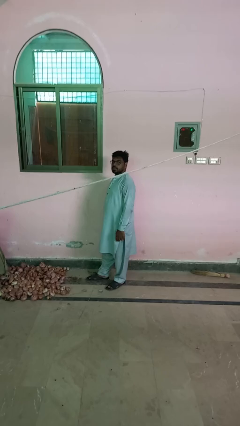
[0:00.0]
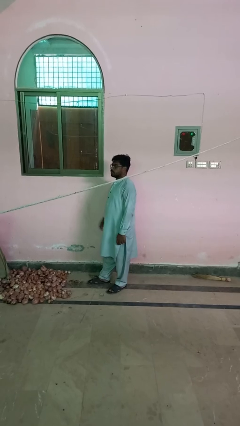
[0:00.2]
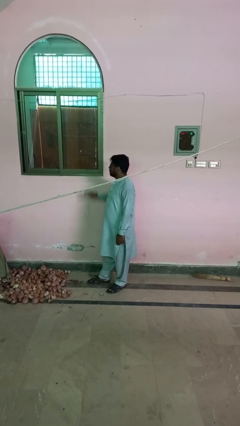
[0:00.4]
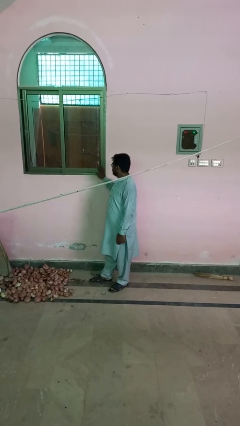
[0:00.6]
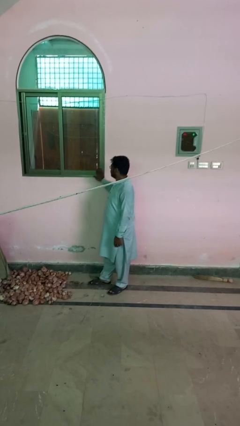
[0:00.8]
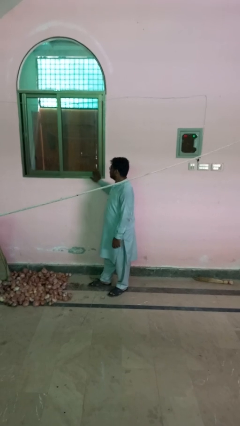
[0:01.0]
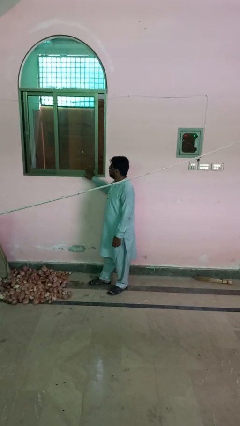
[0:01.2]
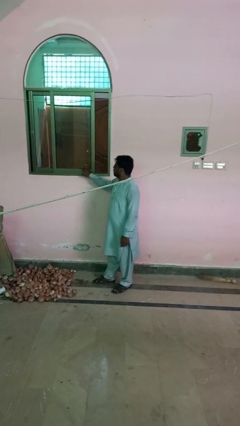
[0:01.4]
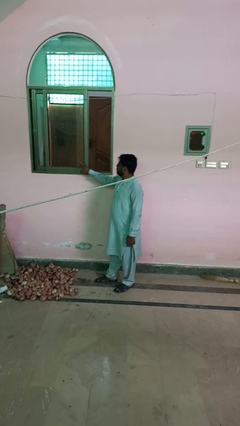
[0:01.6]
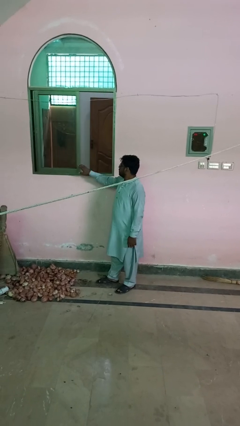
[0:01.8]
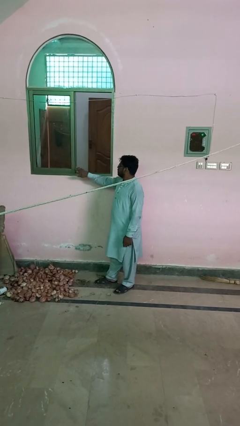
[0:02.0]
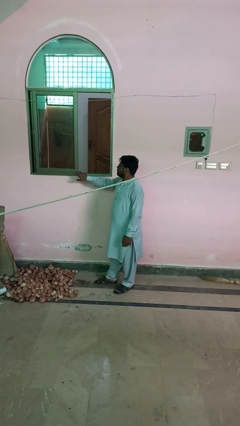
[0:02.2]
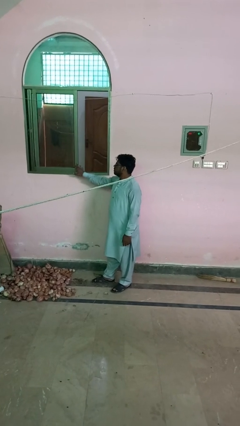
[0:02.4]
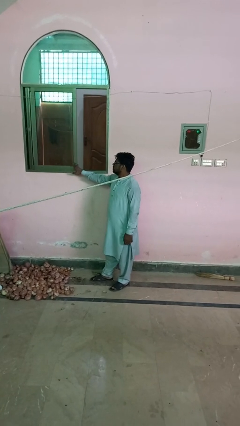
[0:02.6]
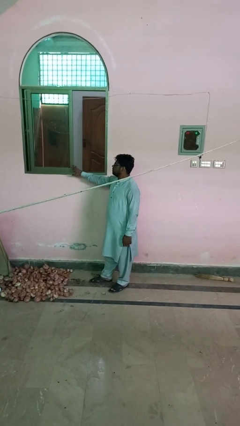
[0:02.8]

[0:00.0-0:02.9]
person opens sliding door

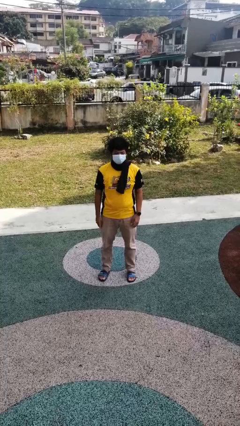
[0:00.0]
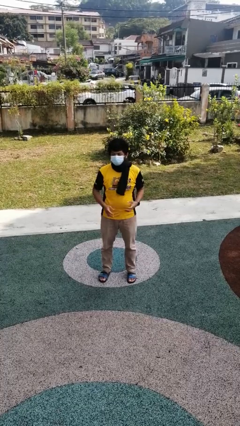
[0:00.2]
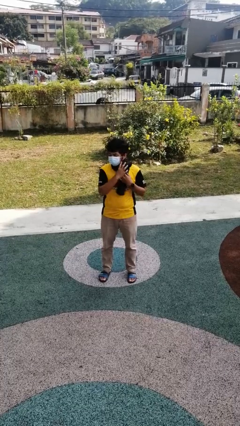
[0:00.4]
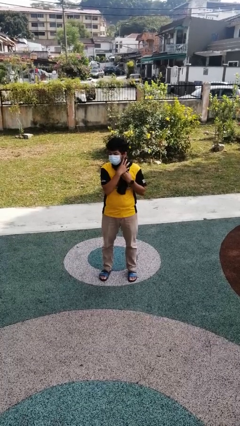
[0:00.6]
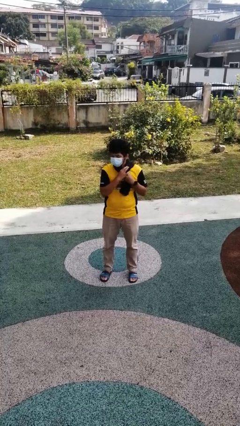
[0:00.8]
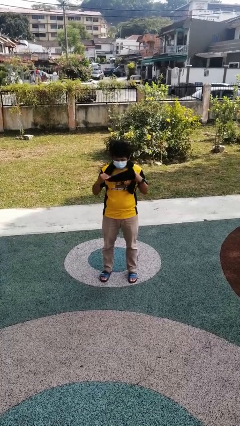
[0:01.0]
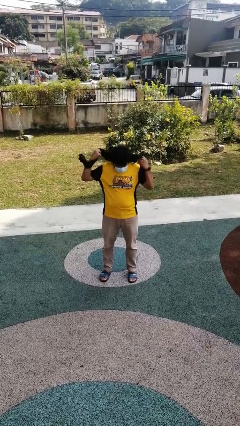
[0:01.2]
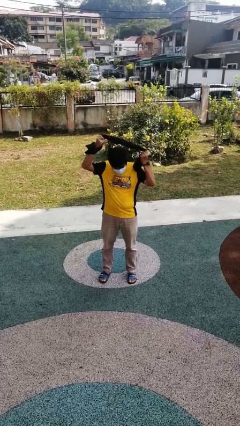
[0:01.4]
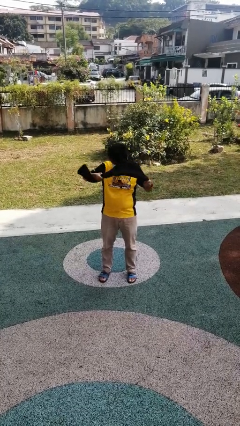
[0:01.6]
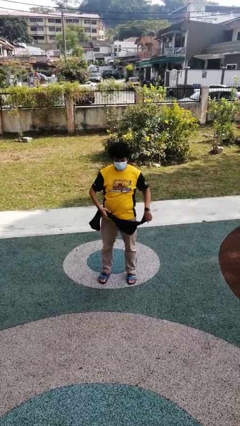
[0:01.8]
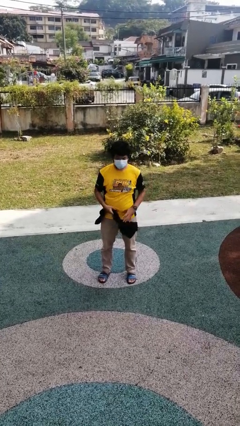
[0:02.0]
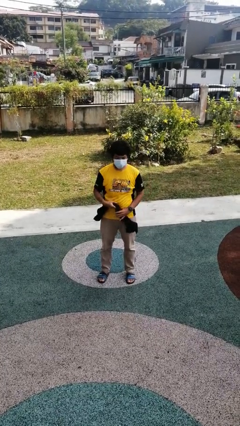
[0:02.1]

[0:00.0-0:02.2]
person takes off scarf

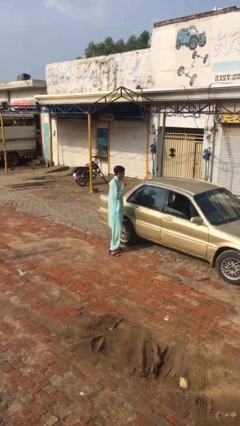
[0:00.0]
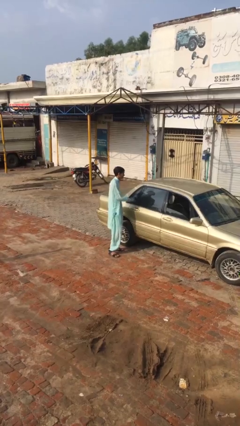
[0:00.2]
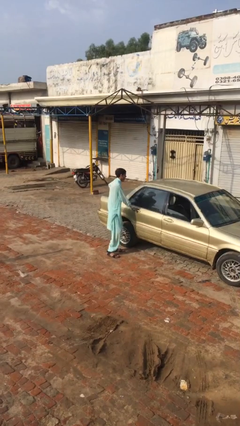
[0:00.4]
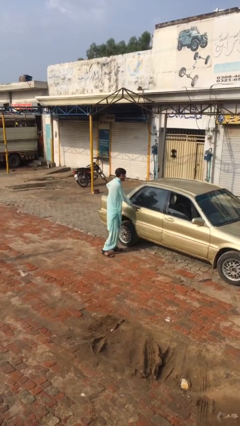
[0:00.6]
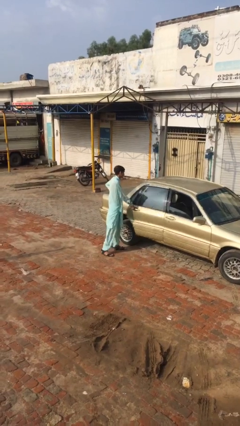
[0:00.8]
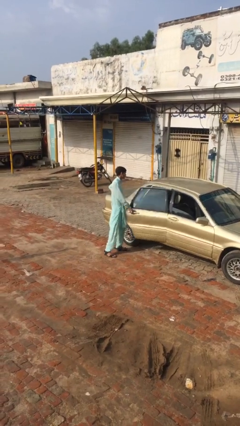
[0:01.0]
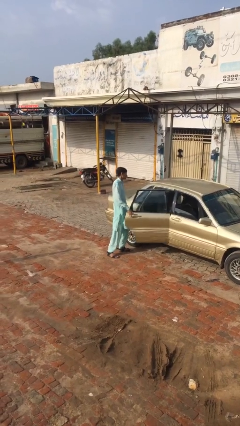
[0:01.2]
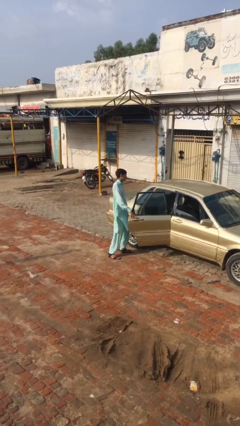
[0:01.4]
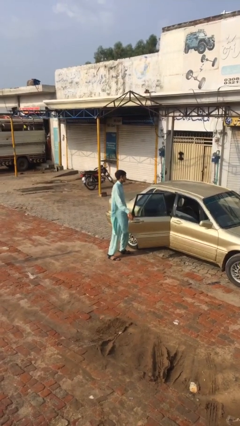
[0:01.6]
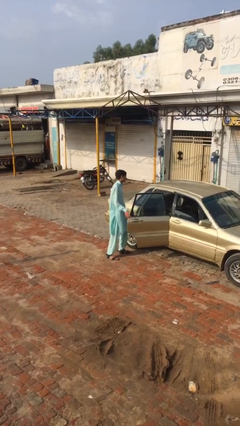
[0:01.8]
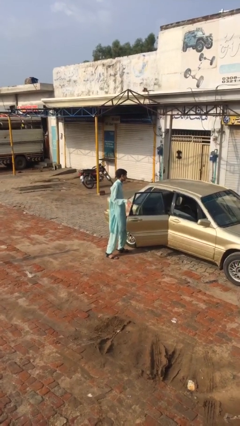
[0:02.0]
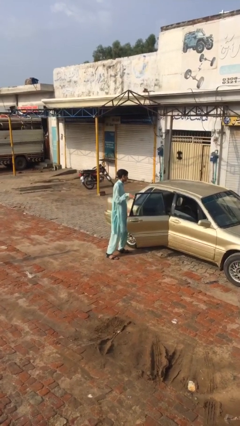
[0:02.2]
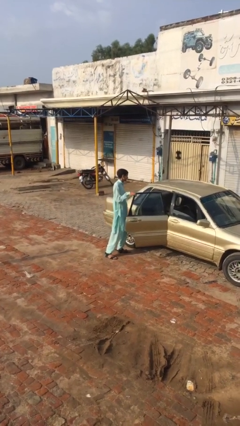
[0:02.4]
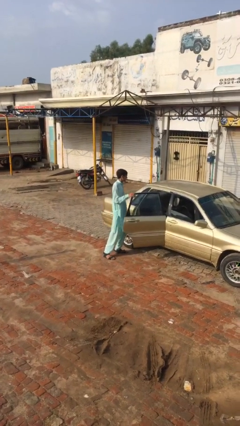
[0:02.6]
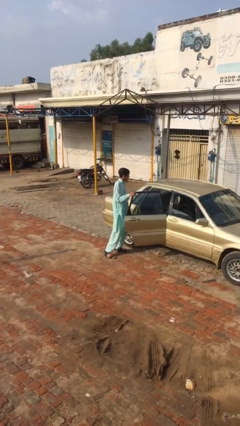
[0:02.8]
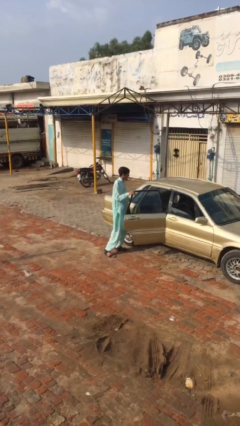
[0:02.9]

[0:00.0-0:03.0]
person opens car door

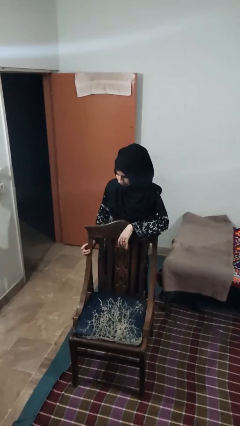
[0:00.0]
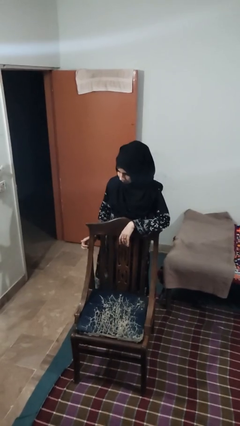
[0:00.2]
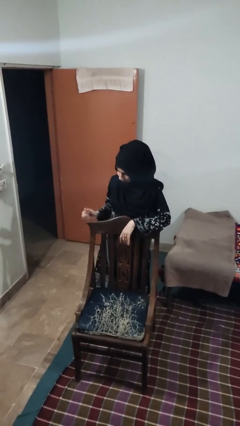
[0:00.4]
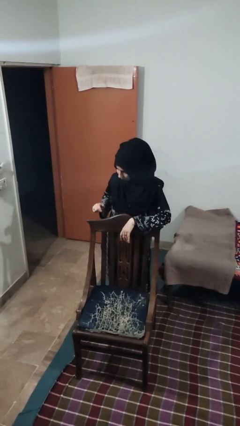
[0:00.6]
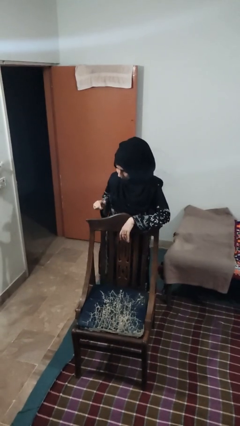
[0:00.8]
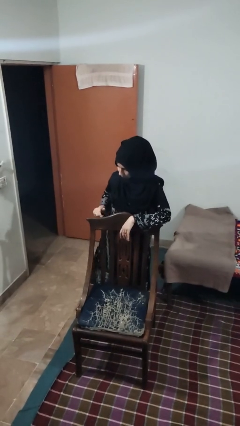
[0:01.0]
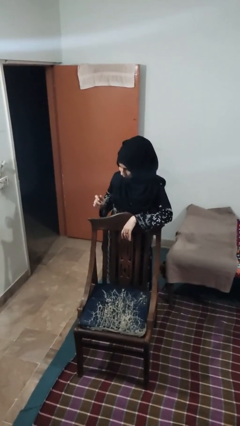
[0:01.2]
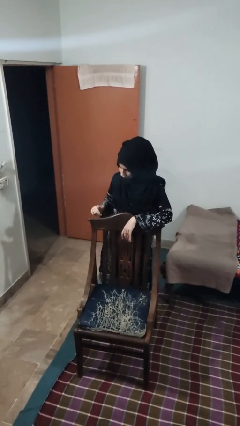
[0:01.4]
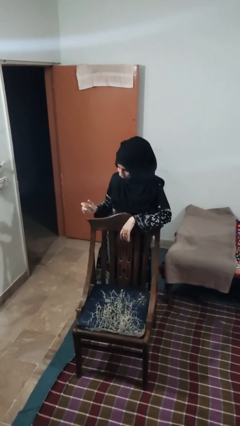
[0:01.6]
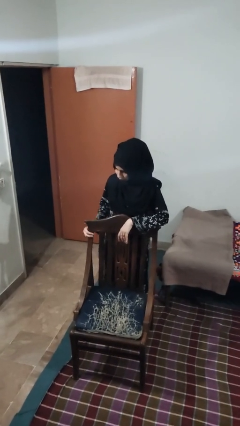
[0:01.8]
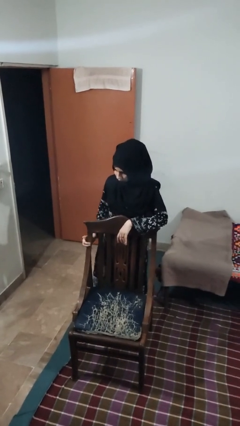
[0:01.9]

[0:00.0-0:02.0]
person taps object with finger

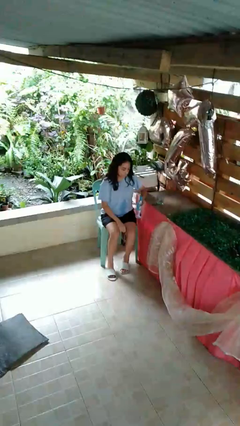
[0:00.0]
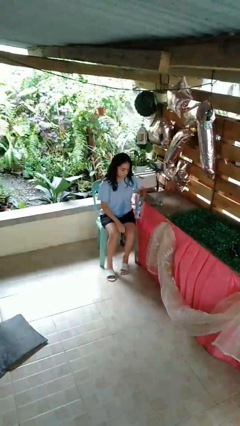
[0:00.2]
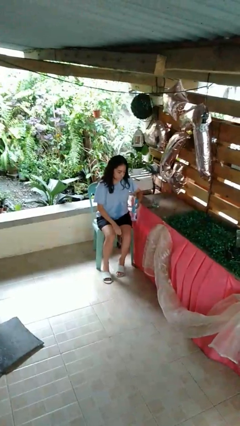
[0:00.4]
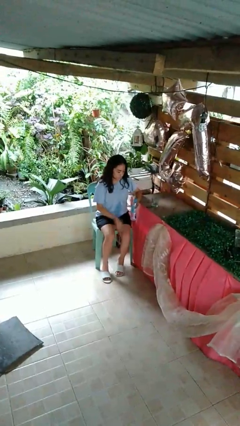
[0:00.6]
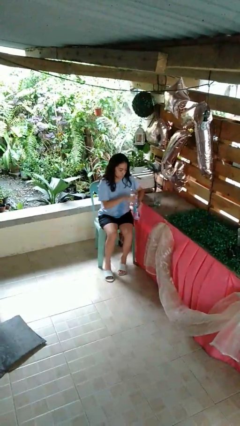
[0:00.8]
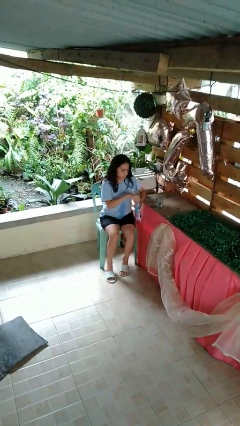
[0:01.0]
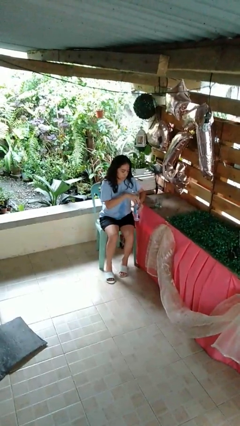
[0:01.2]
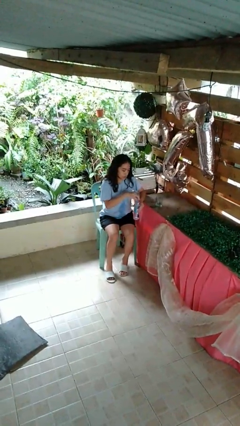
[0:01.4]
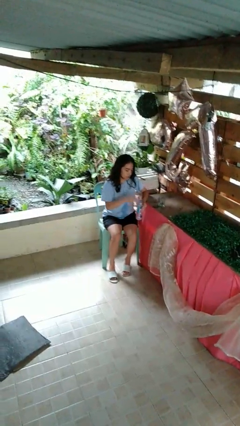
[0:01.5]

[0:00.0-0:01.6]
person unscrews lid from bottle

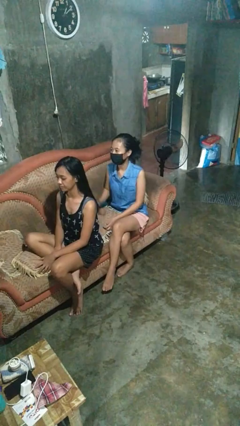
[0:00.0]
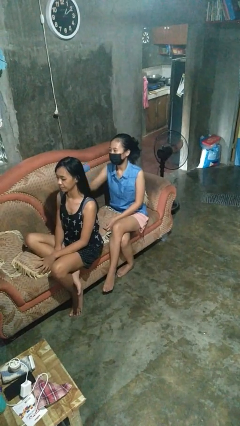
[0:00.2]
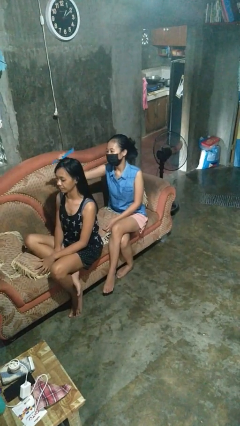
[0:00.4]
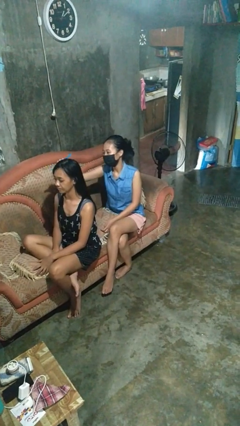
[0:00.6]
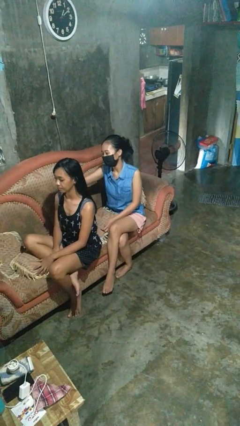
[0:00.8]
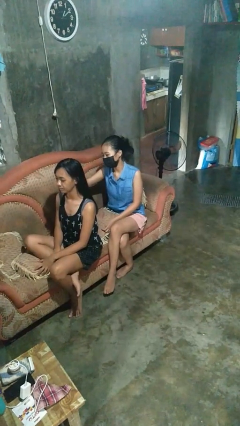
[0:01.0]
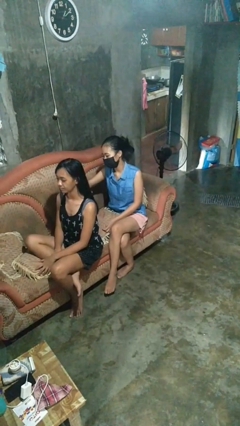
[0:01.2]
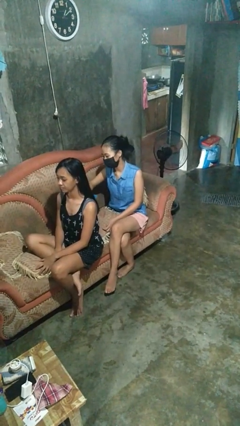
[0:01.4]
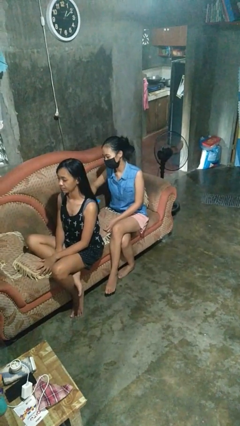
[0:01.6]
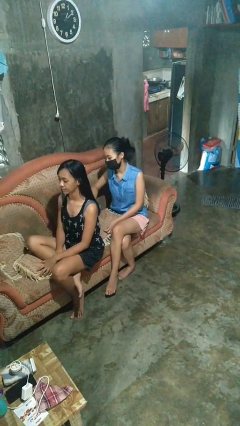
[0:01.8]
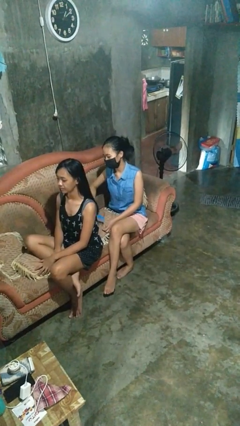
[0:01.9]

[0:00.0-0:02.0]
person brushes hair of person

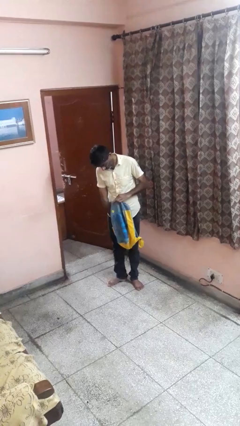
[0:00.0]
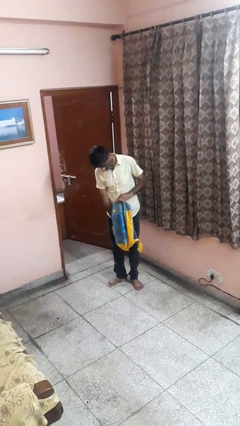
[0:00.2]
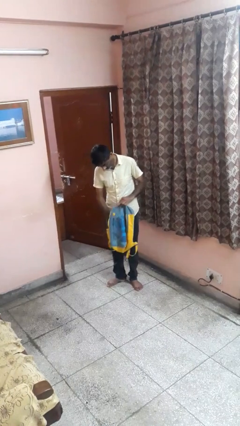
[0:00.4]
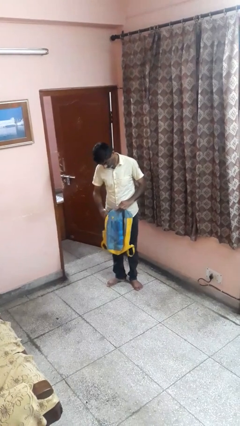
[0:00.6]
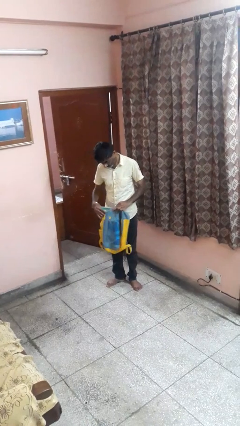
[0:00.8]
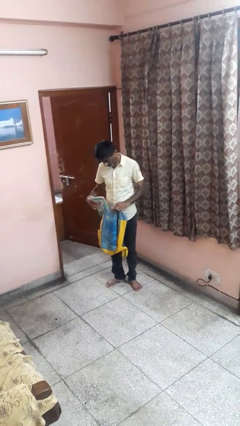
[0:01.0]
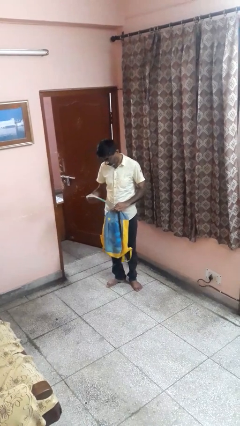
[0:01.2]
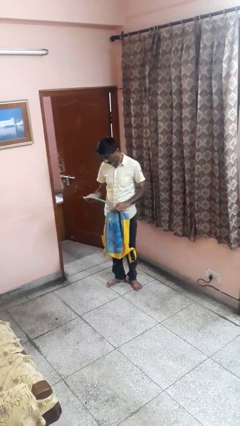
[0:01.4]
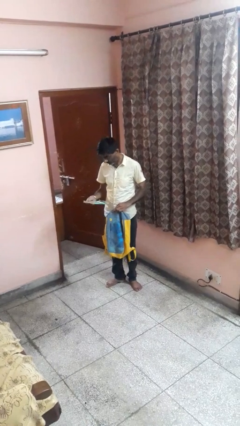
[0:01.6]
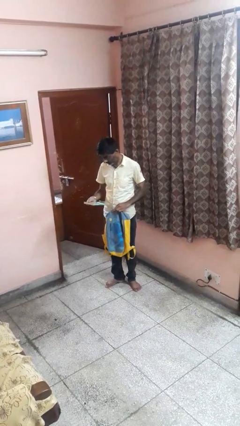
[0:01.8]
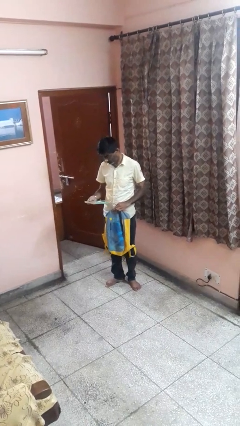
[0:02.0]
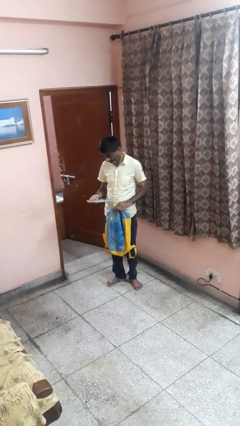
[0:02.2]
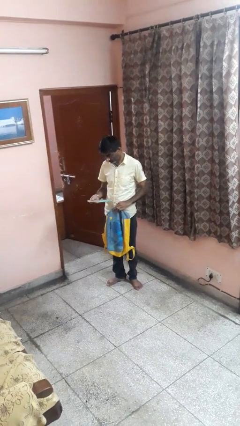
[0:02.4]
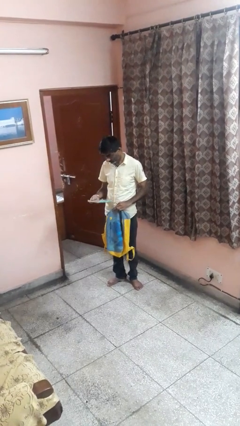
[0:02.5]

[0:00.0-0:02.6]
person takes object from backpack

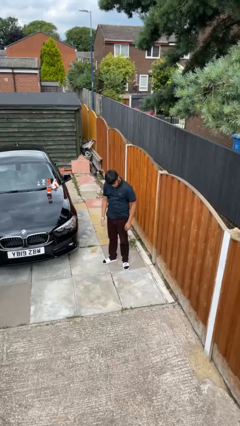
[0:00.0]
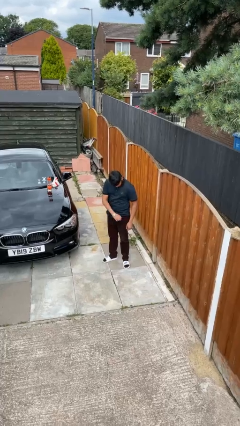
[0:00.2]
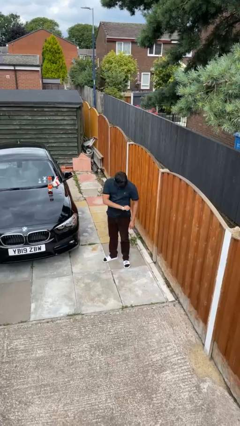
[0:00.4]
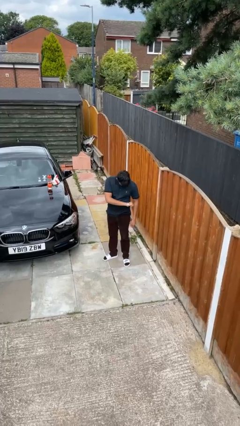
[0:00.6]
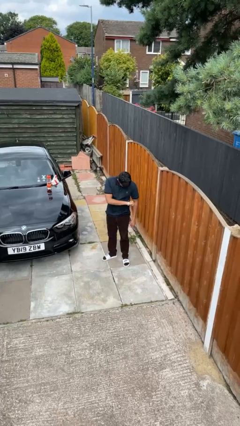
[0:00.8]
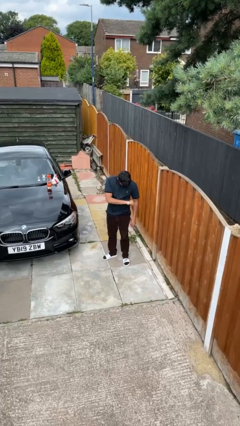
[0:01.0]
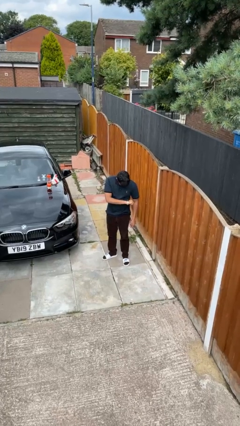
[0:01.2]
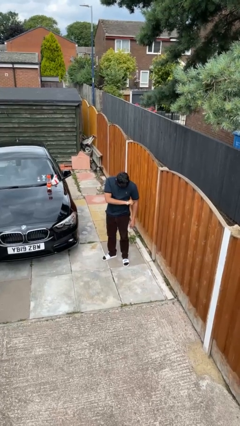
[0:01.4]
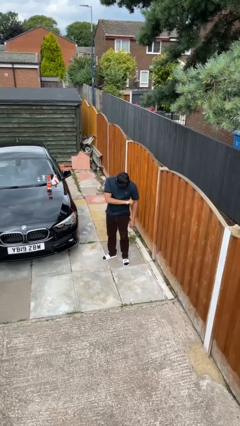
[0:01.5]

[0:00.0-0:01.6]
person looks at wristwatch
